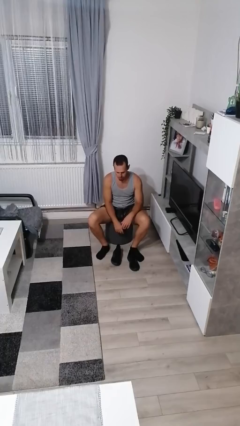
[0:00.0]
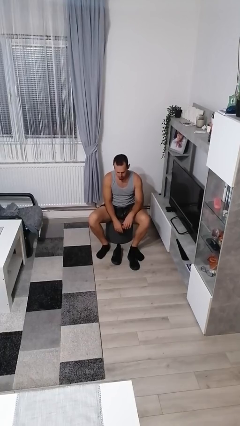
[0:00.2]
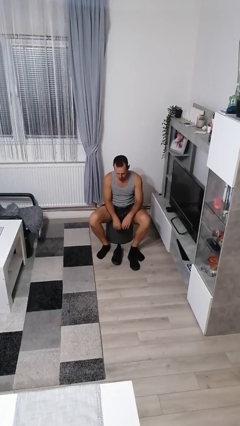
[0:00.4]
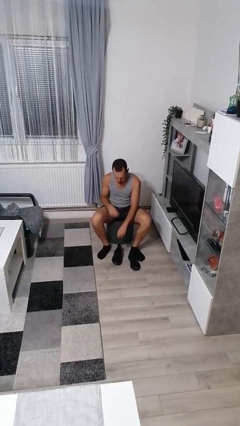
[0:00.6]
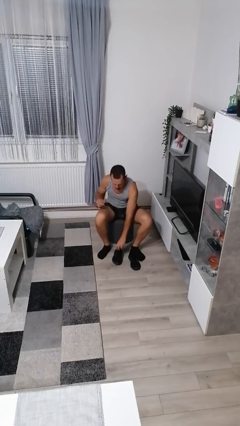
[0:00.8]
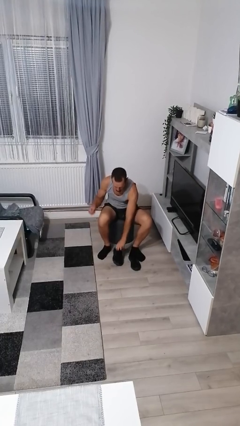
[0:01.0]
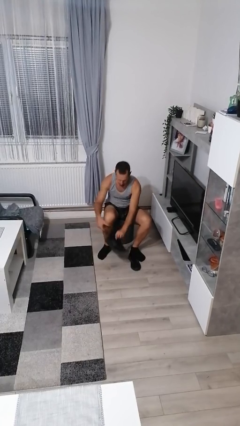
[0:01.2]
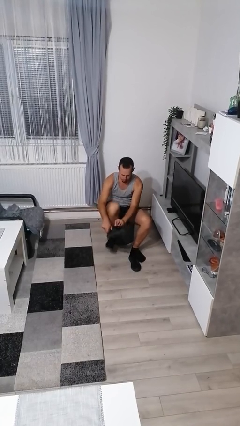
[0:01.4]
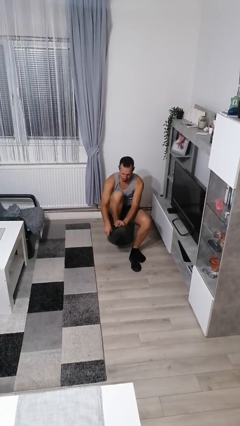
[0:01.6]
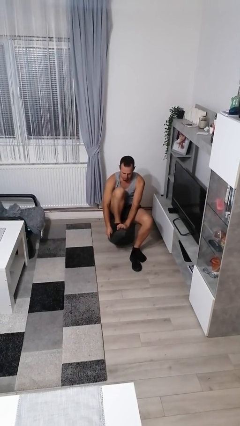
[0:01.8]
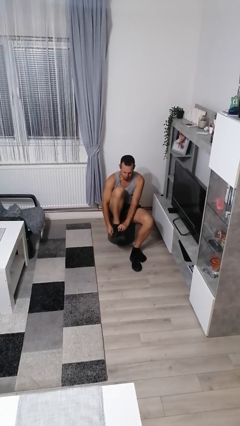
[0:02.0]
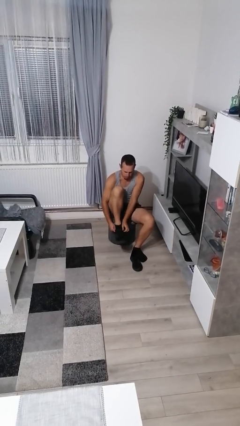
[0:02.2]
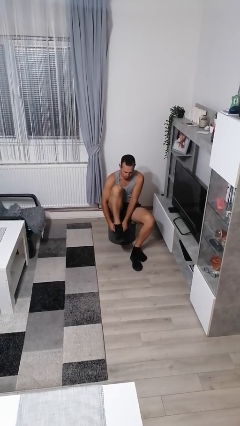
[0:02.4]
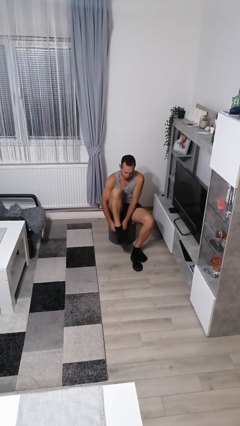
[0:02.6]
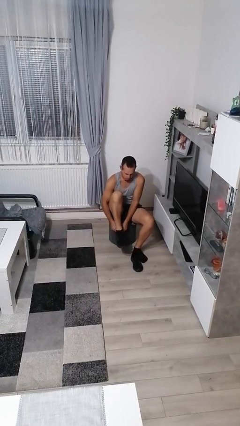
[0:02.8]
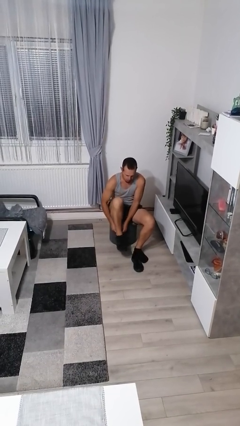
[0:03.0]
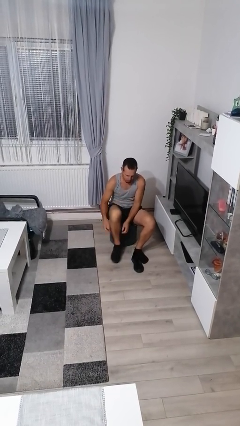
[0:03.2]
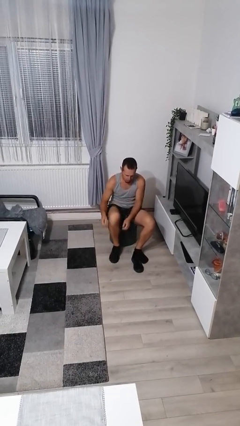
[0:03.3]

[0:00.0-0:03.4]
person puts on shoes

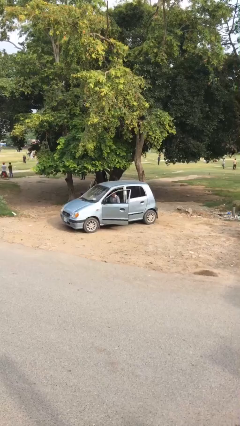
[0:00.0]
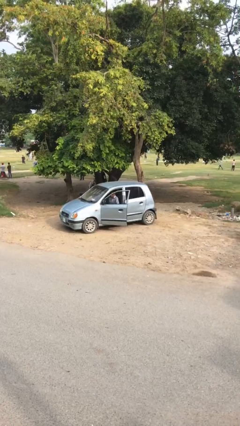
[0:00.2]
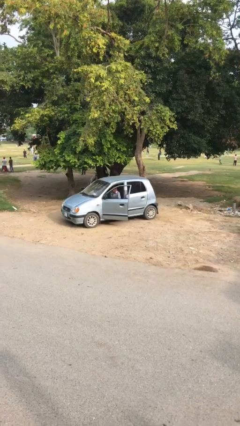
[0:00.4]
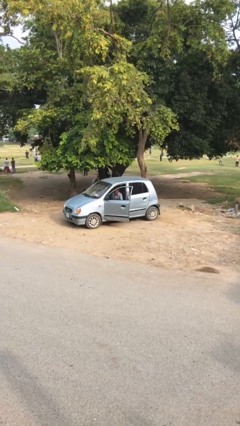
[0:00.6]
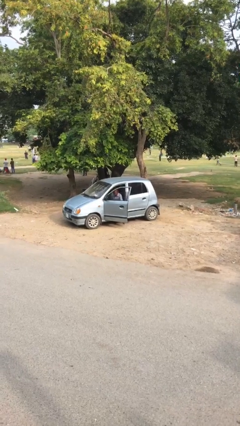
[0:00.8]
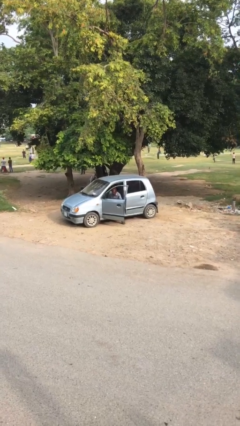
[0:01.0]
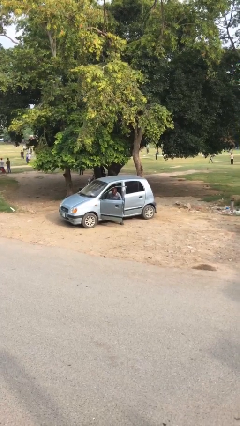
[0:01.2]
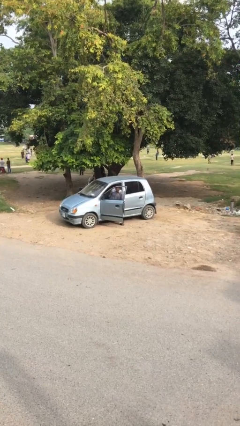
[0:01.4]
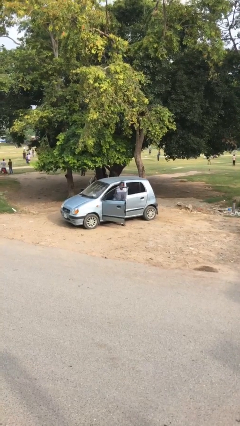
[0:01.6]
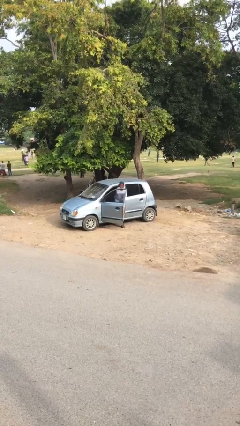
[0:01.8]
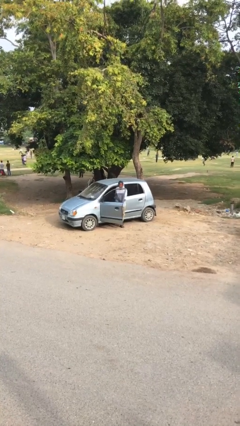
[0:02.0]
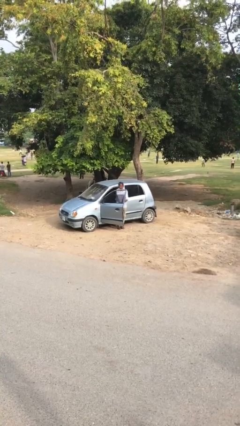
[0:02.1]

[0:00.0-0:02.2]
person exits car

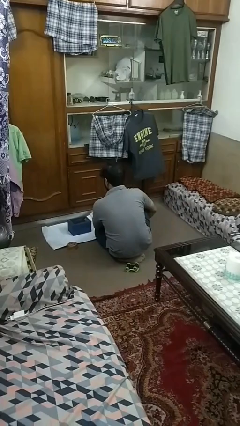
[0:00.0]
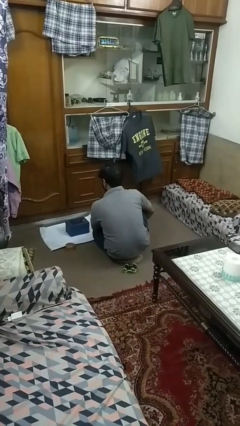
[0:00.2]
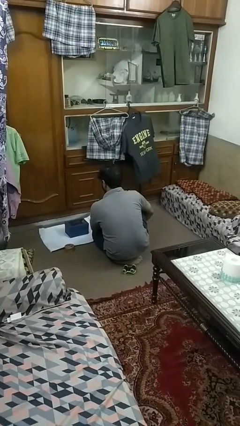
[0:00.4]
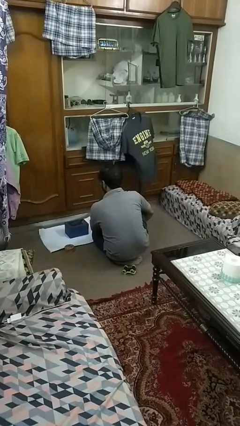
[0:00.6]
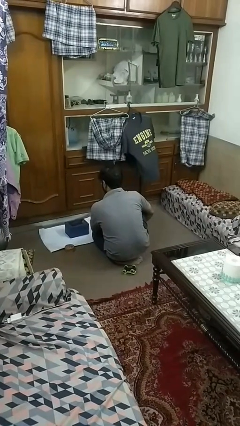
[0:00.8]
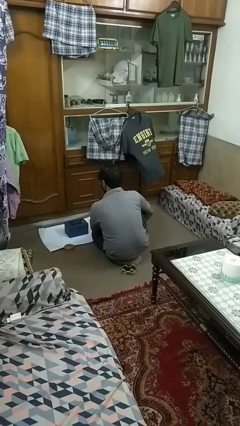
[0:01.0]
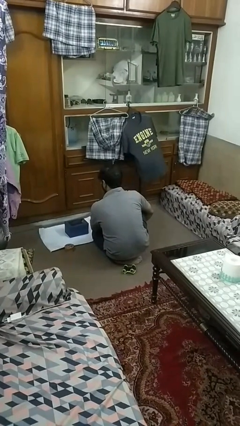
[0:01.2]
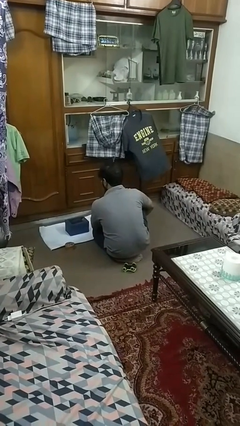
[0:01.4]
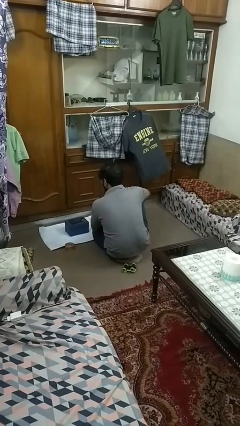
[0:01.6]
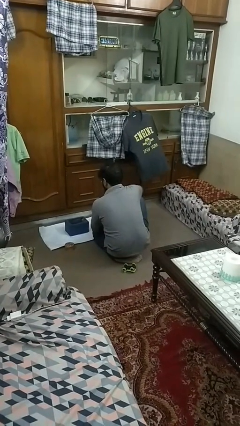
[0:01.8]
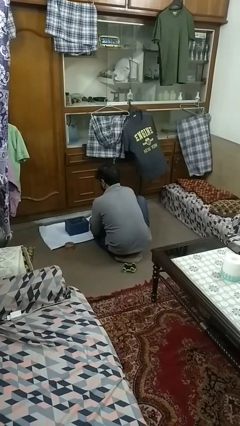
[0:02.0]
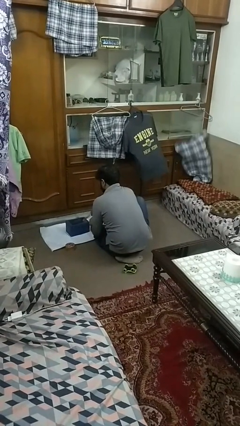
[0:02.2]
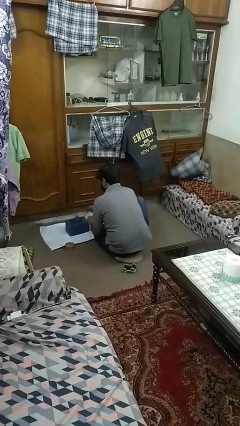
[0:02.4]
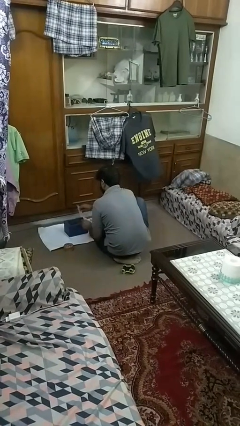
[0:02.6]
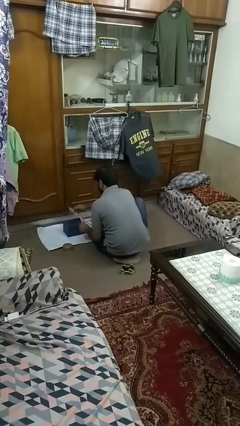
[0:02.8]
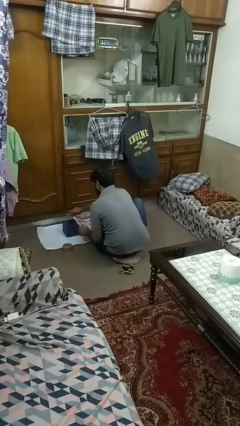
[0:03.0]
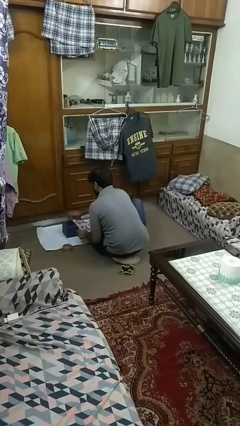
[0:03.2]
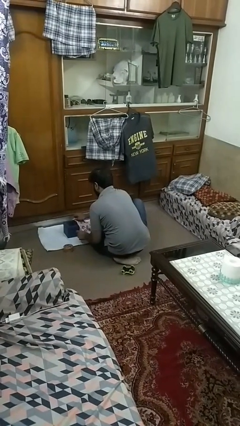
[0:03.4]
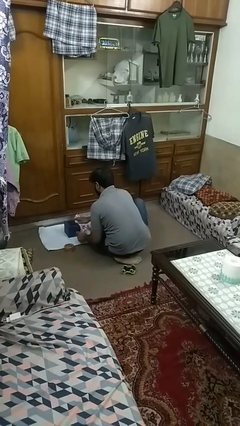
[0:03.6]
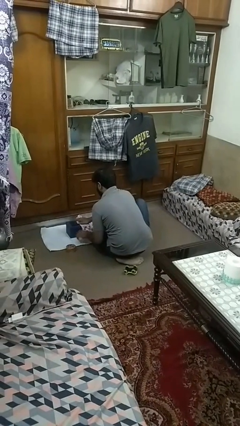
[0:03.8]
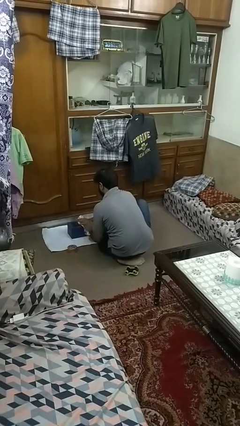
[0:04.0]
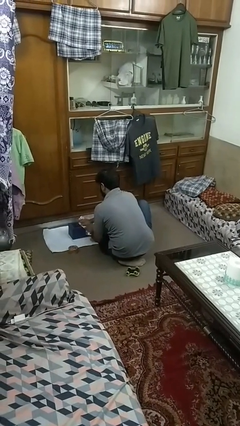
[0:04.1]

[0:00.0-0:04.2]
person wraps box

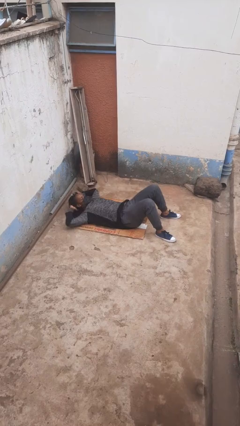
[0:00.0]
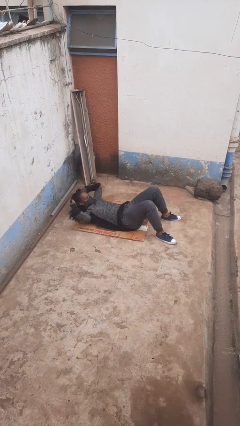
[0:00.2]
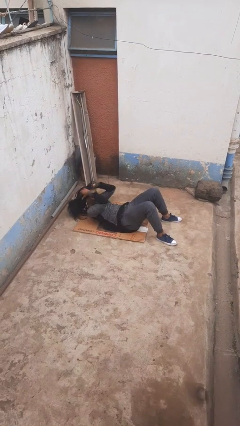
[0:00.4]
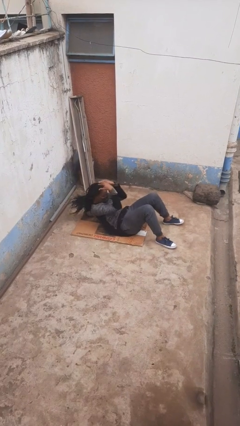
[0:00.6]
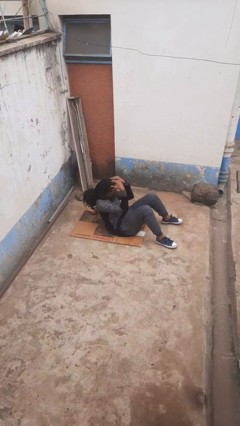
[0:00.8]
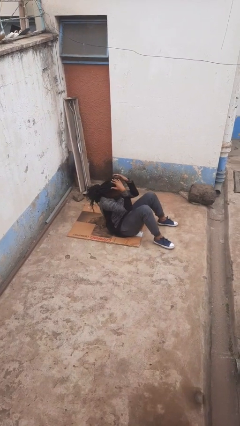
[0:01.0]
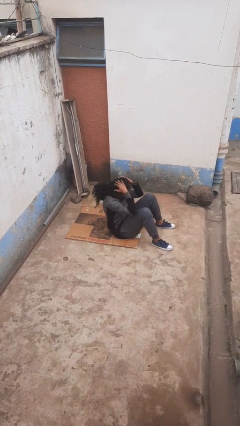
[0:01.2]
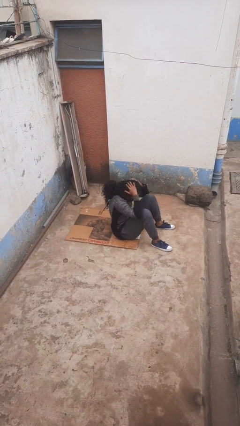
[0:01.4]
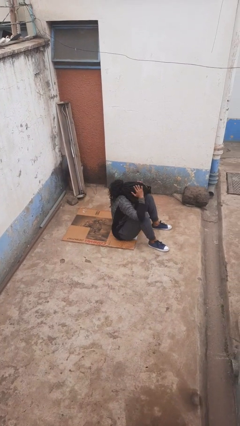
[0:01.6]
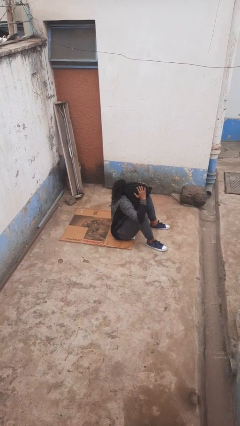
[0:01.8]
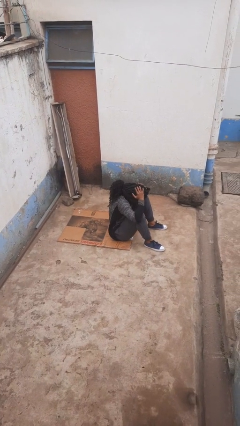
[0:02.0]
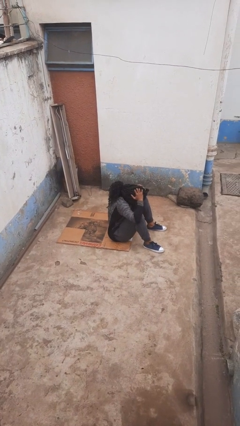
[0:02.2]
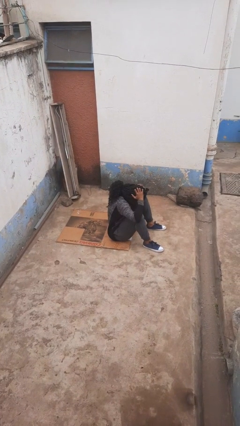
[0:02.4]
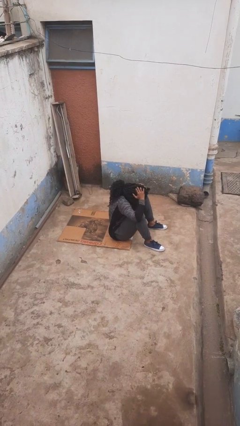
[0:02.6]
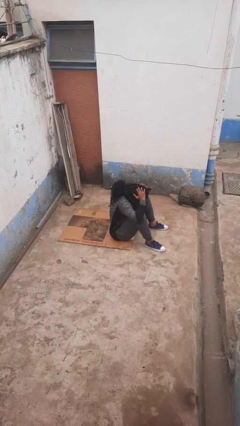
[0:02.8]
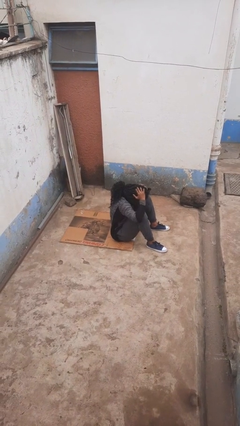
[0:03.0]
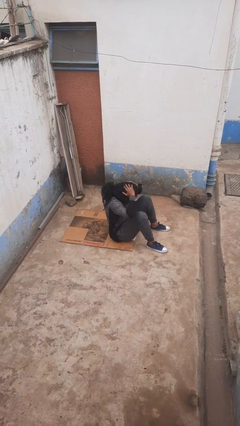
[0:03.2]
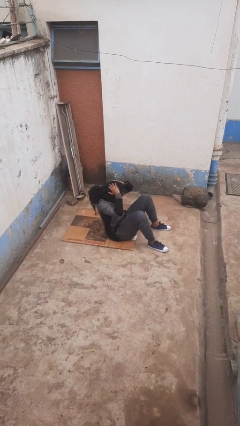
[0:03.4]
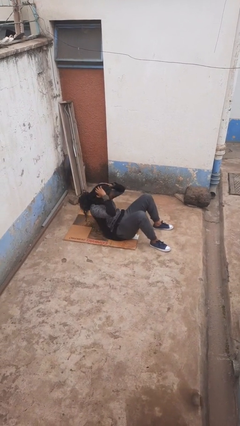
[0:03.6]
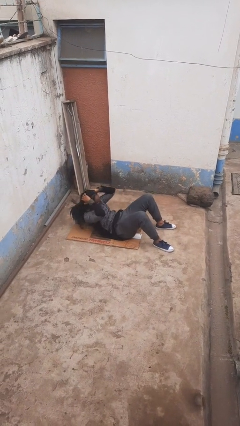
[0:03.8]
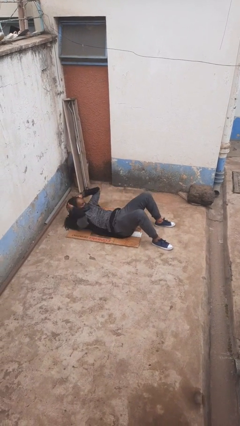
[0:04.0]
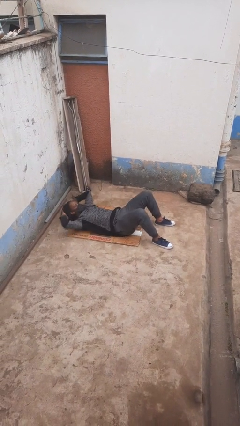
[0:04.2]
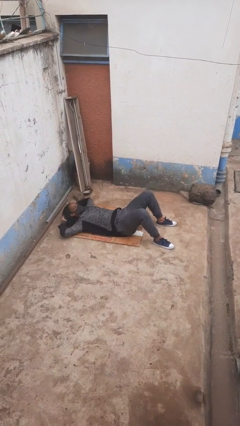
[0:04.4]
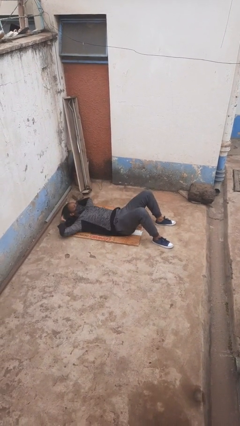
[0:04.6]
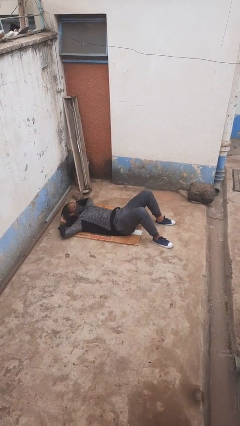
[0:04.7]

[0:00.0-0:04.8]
person exercises with situp

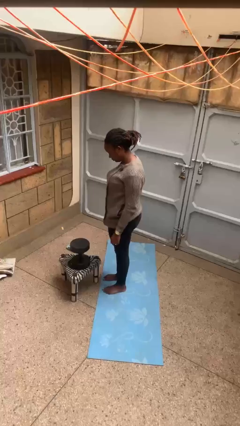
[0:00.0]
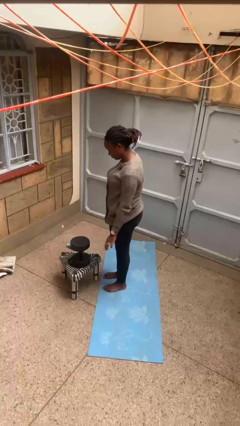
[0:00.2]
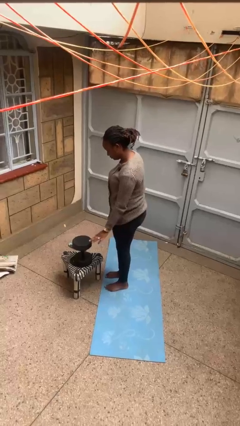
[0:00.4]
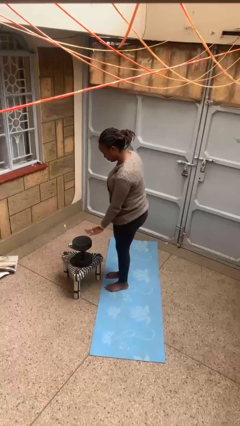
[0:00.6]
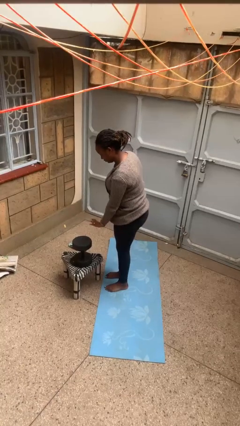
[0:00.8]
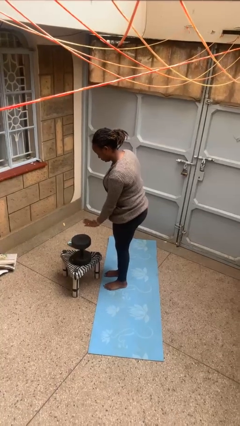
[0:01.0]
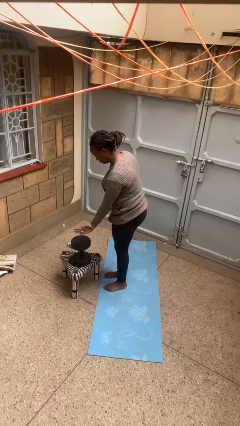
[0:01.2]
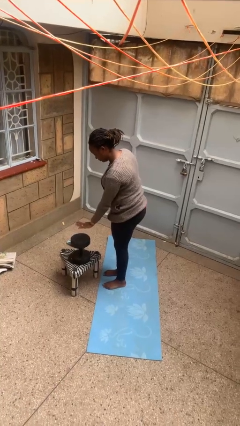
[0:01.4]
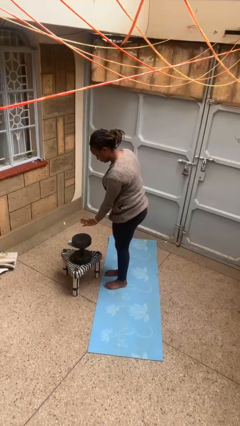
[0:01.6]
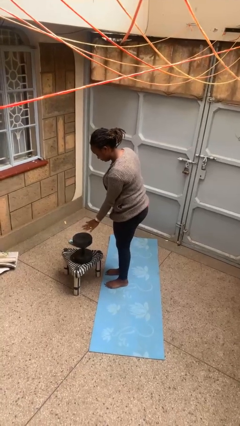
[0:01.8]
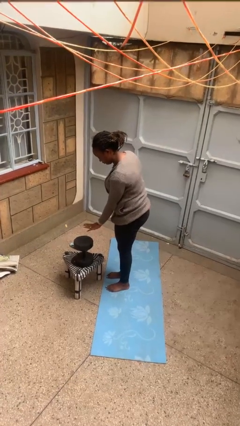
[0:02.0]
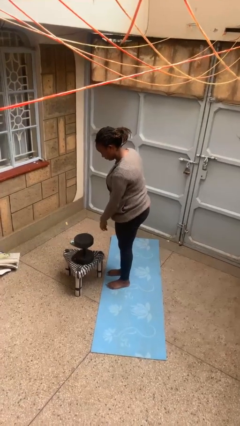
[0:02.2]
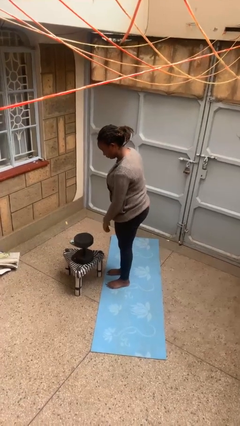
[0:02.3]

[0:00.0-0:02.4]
person waves hand over object

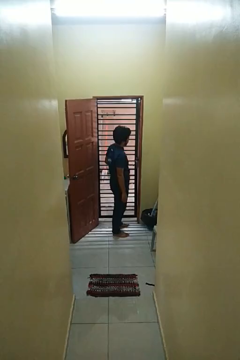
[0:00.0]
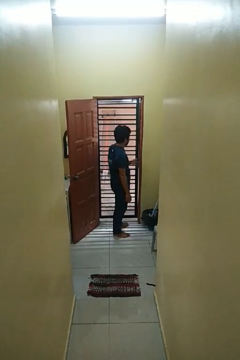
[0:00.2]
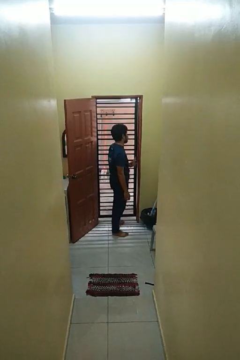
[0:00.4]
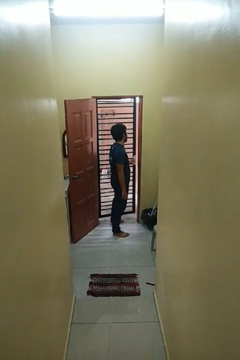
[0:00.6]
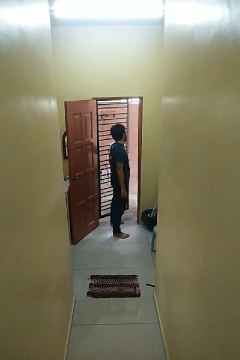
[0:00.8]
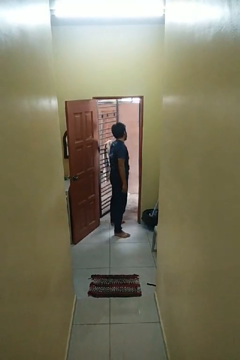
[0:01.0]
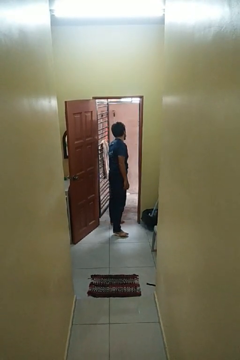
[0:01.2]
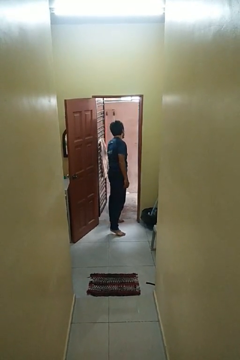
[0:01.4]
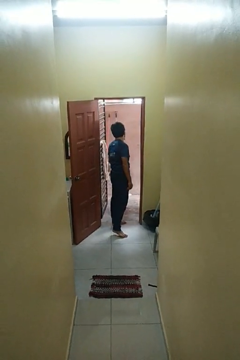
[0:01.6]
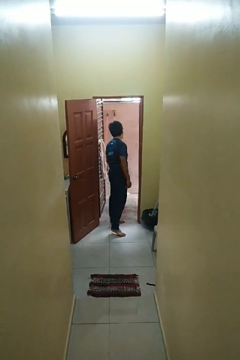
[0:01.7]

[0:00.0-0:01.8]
person opens gate
